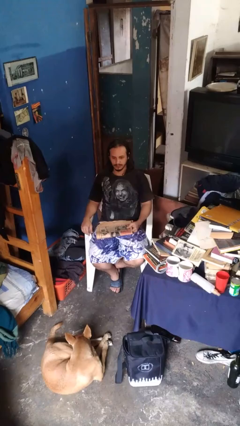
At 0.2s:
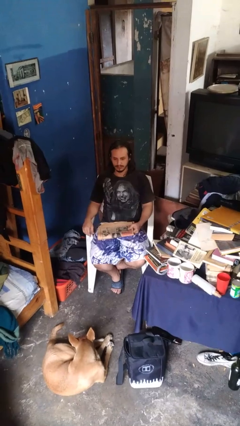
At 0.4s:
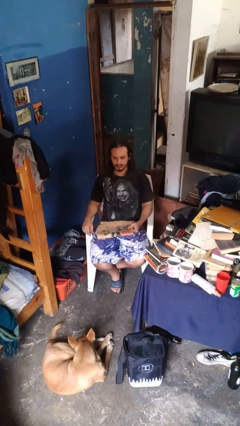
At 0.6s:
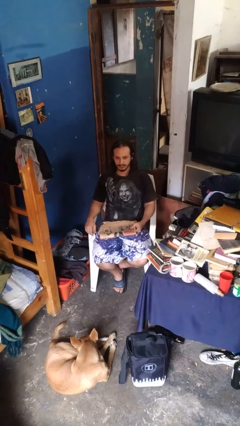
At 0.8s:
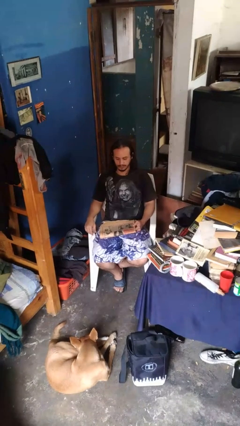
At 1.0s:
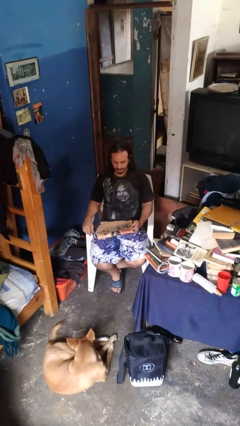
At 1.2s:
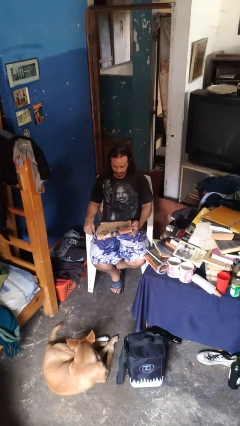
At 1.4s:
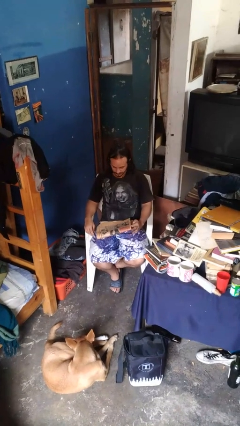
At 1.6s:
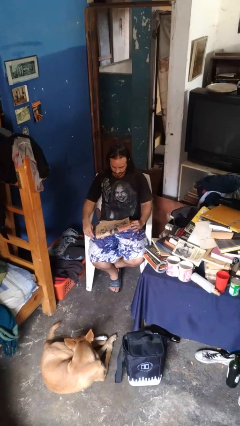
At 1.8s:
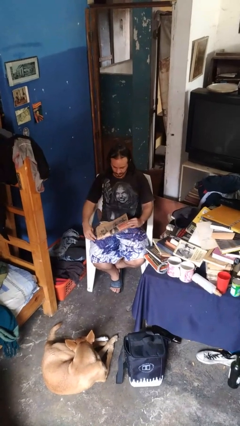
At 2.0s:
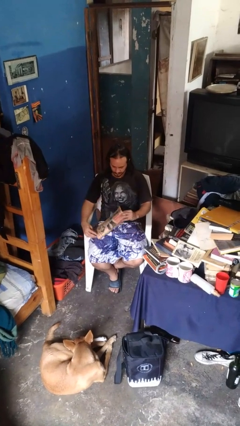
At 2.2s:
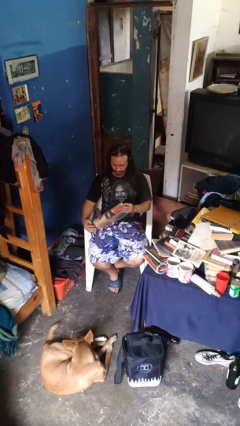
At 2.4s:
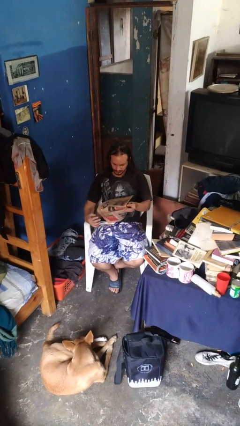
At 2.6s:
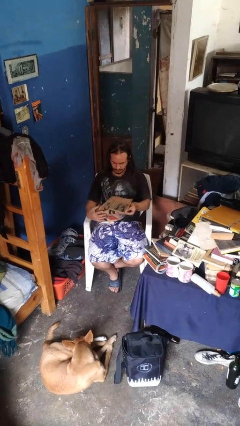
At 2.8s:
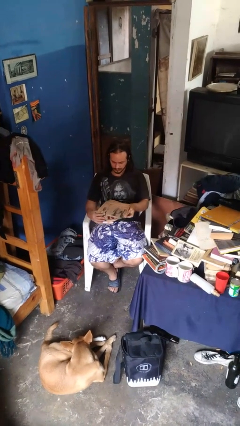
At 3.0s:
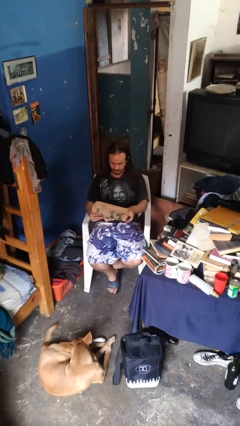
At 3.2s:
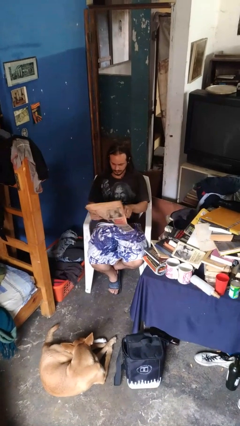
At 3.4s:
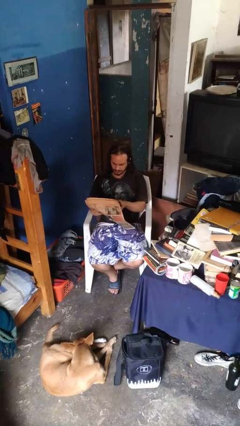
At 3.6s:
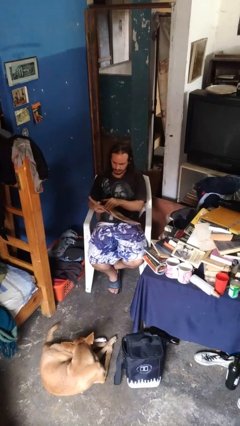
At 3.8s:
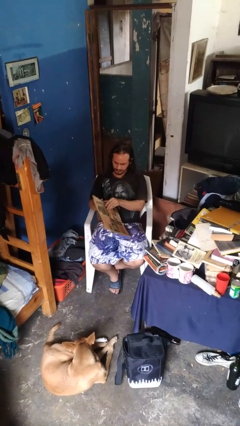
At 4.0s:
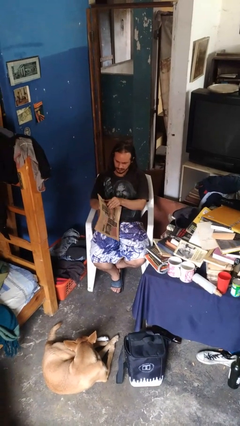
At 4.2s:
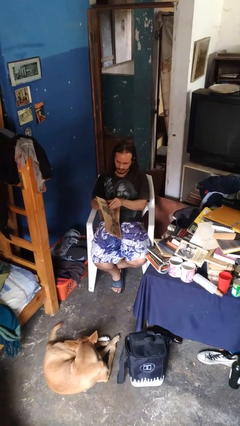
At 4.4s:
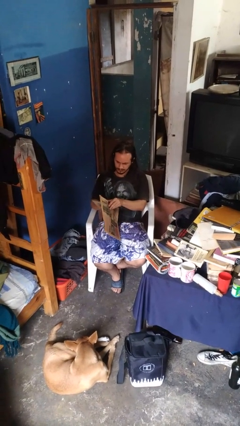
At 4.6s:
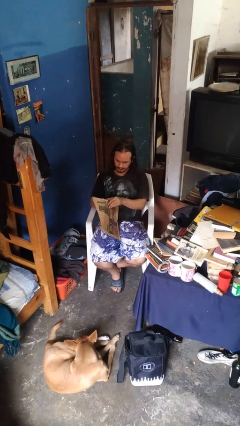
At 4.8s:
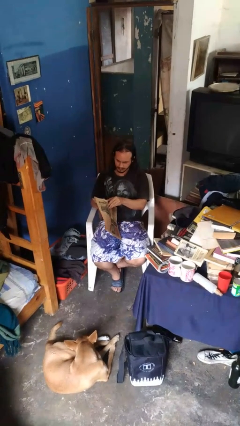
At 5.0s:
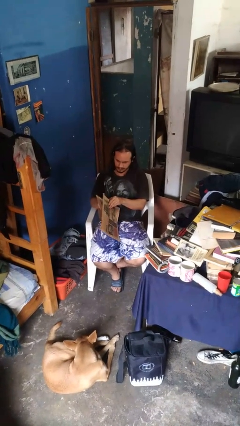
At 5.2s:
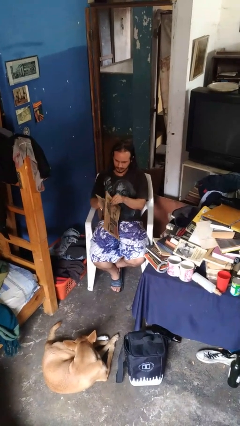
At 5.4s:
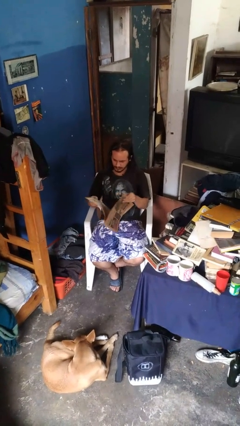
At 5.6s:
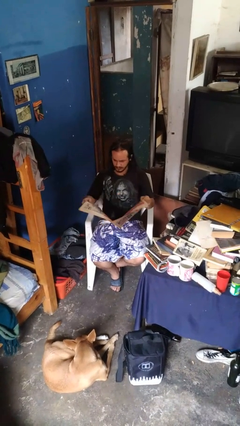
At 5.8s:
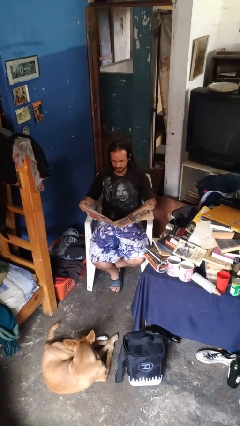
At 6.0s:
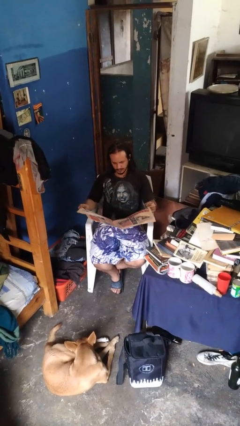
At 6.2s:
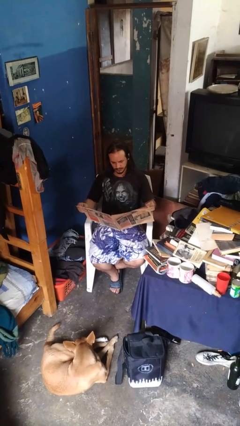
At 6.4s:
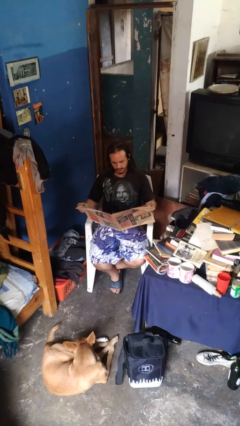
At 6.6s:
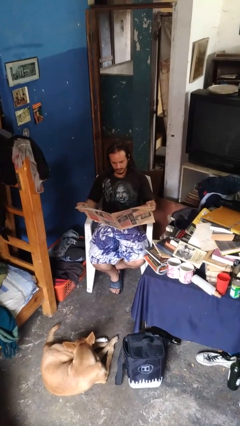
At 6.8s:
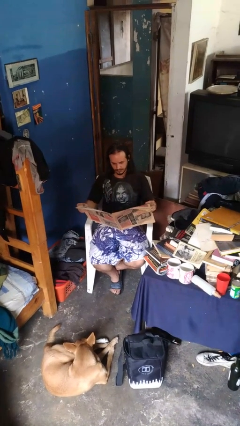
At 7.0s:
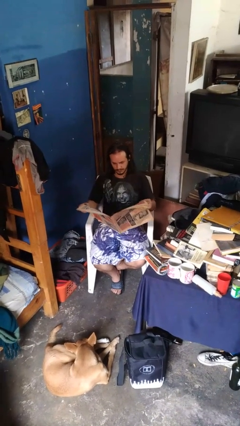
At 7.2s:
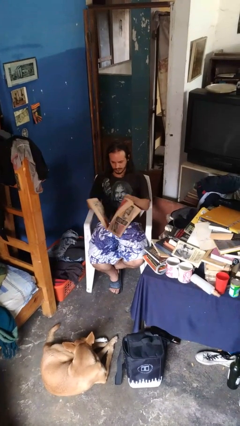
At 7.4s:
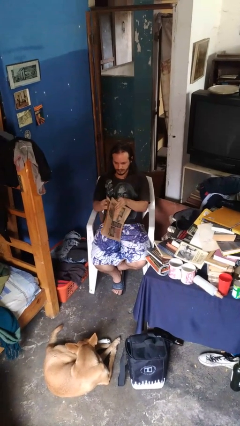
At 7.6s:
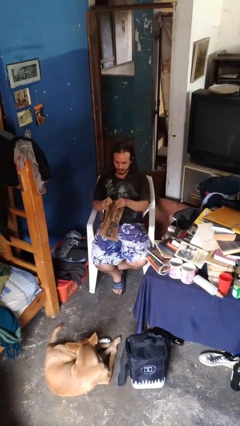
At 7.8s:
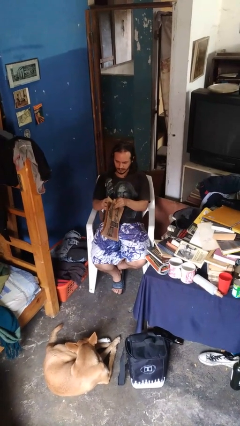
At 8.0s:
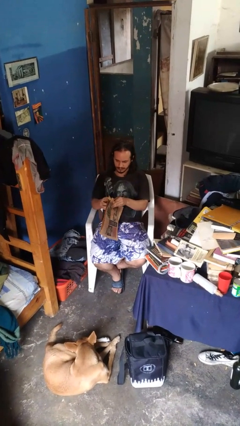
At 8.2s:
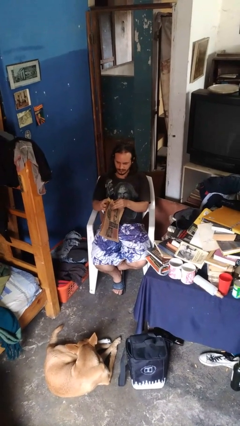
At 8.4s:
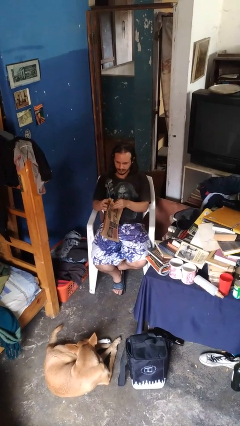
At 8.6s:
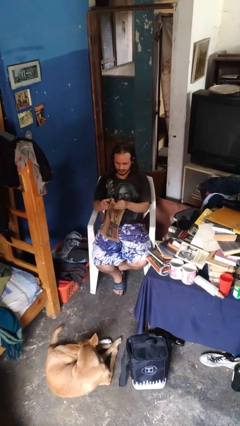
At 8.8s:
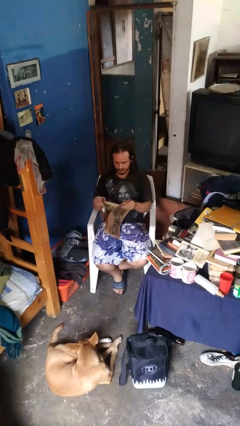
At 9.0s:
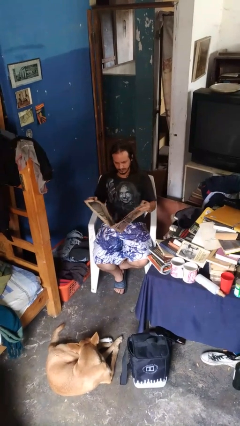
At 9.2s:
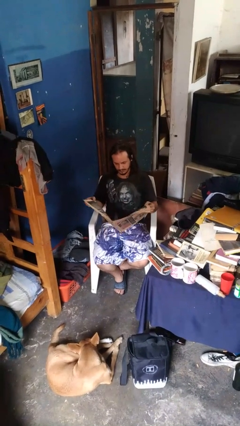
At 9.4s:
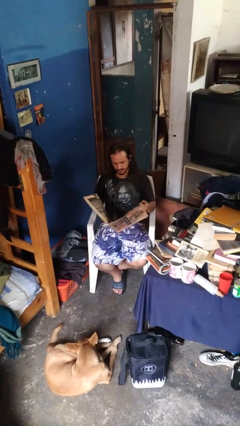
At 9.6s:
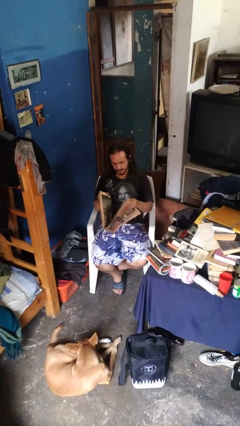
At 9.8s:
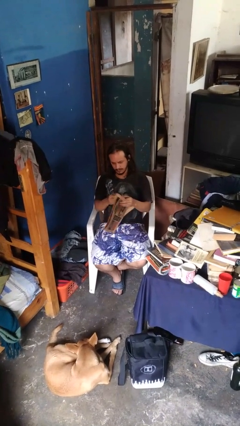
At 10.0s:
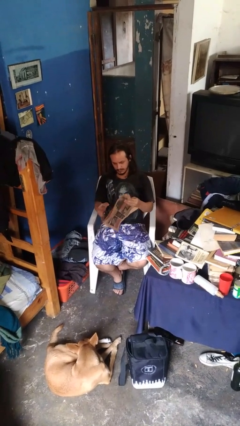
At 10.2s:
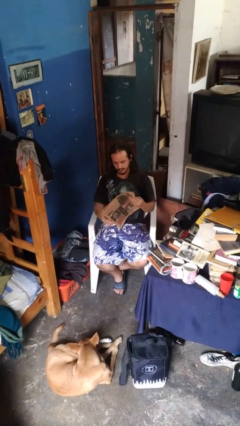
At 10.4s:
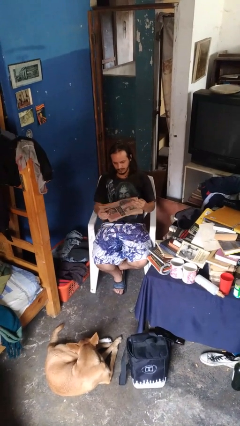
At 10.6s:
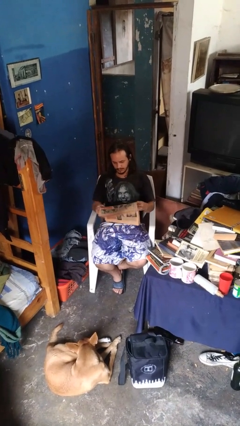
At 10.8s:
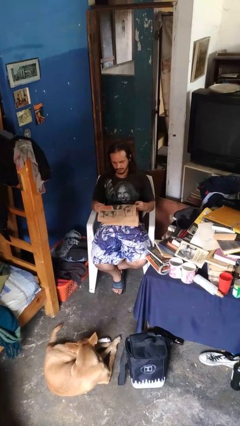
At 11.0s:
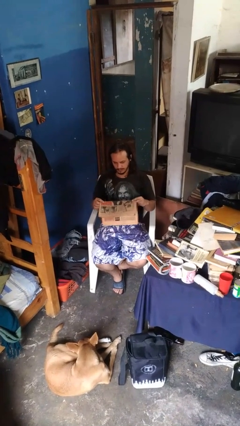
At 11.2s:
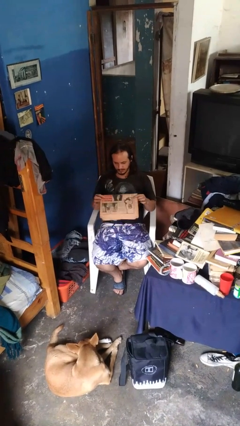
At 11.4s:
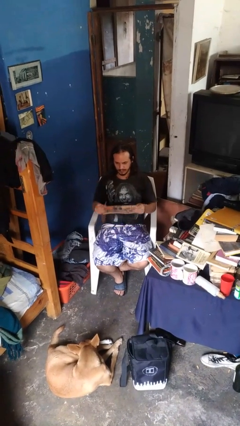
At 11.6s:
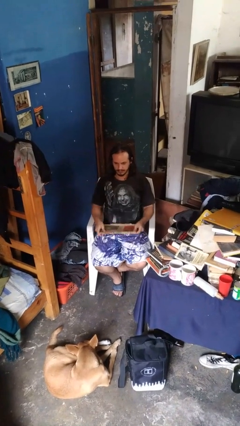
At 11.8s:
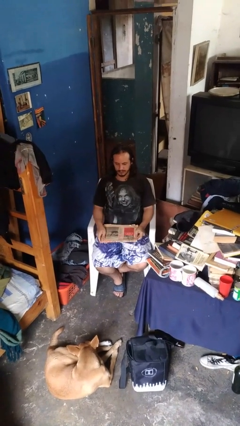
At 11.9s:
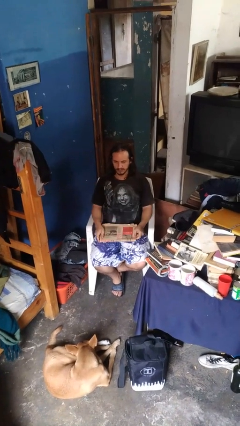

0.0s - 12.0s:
person reads newspaper

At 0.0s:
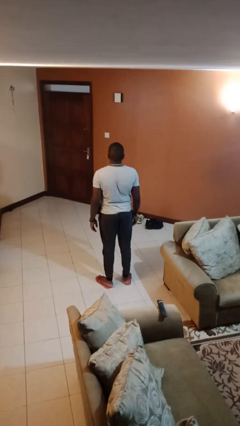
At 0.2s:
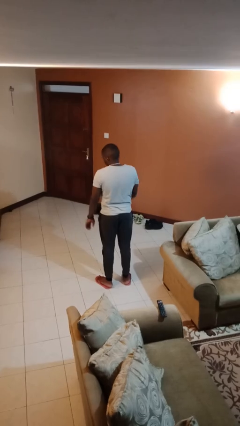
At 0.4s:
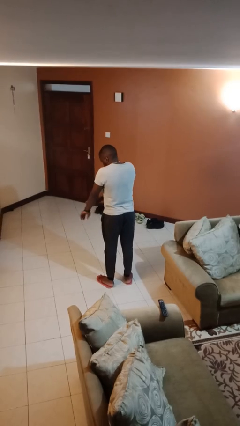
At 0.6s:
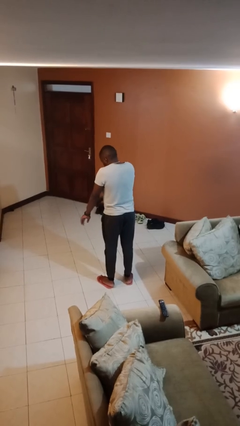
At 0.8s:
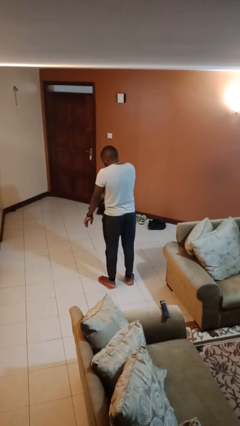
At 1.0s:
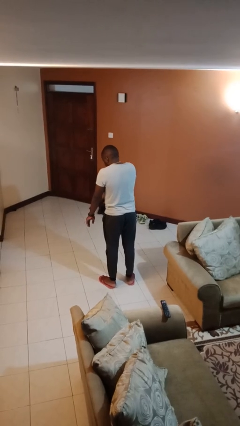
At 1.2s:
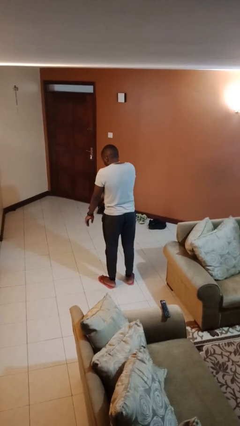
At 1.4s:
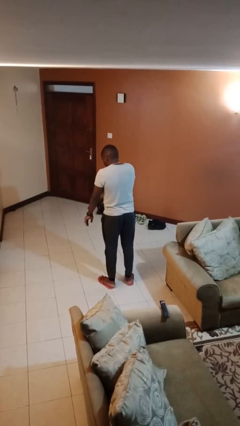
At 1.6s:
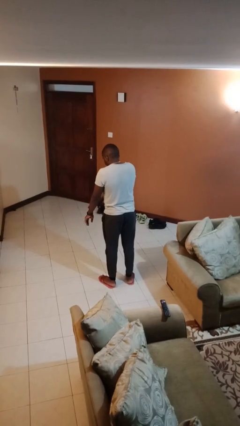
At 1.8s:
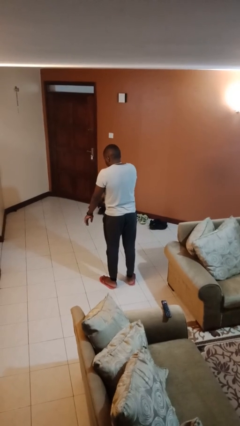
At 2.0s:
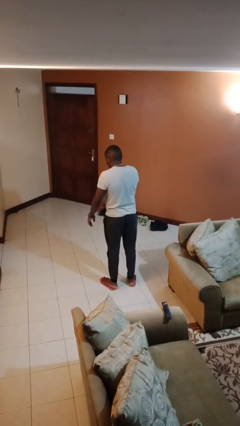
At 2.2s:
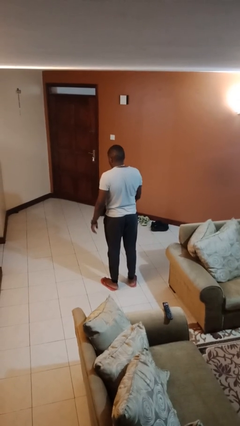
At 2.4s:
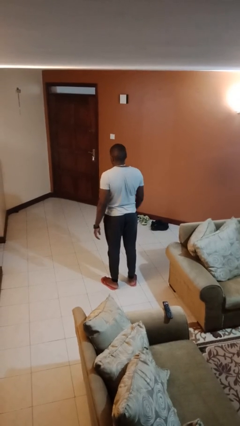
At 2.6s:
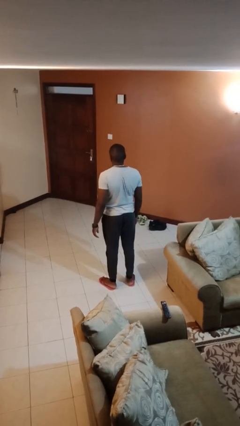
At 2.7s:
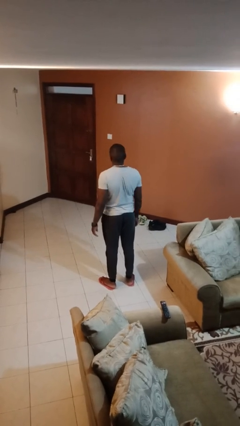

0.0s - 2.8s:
person swats bug

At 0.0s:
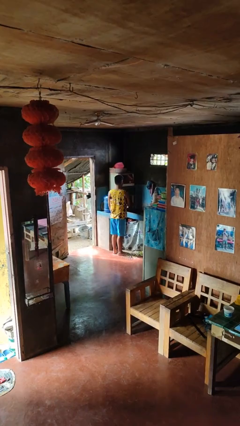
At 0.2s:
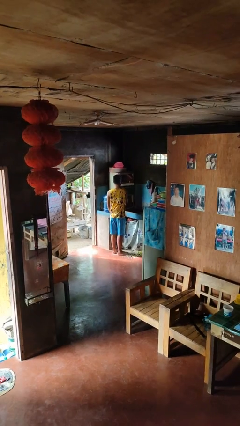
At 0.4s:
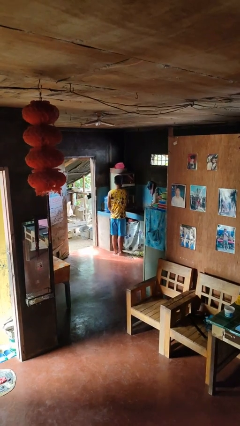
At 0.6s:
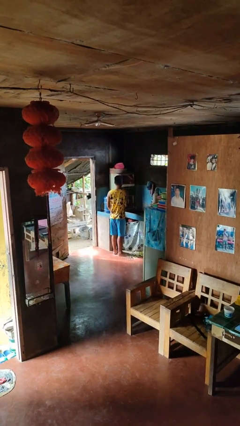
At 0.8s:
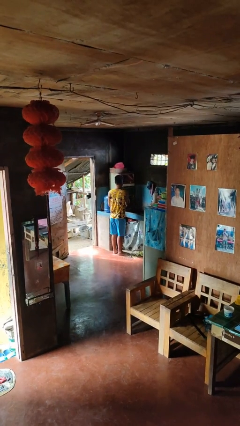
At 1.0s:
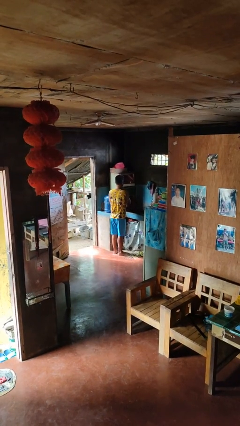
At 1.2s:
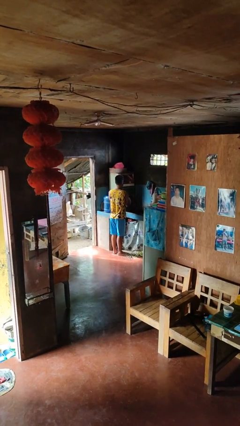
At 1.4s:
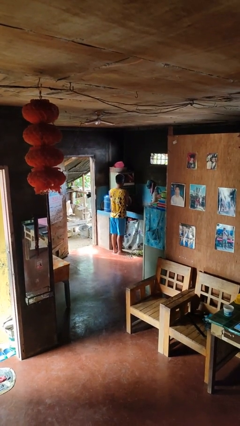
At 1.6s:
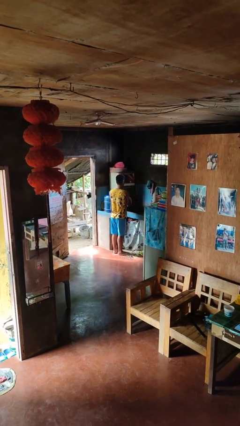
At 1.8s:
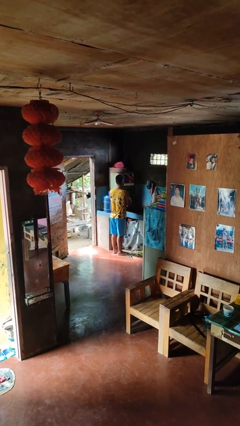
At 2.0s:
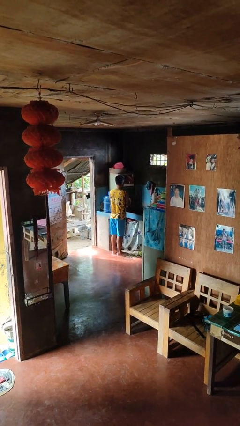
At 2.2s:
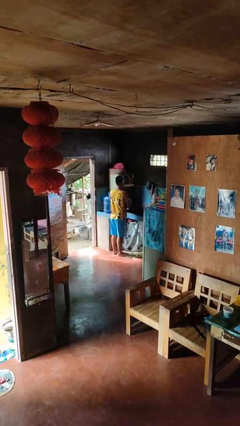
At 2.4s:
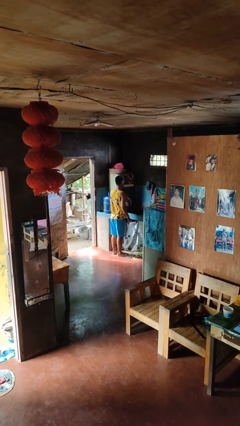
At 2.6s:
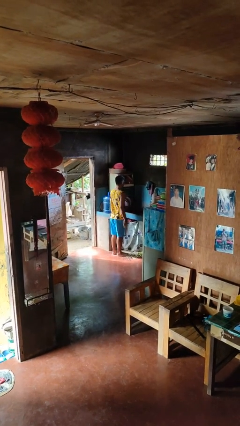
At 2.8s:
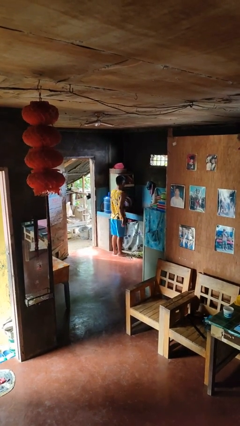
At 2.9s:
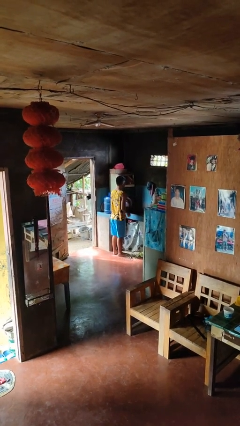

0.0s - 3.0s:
person opens dishwasher

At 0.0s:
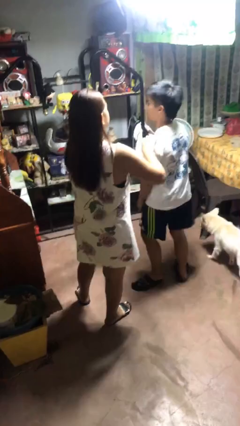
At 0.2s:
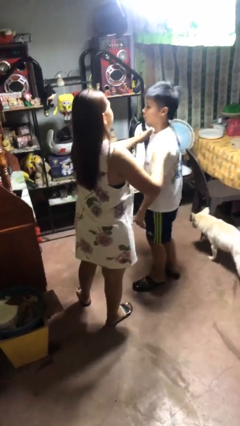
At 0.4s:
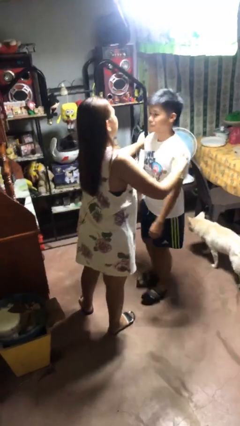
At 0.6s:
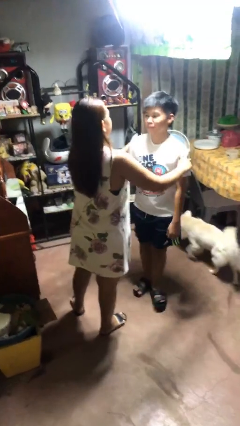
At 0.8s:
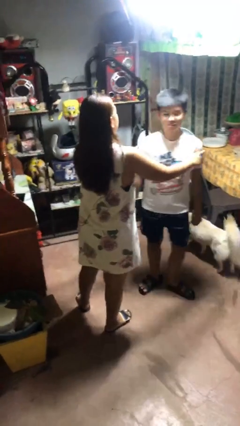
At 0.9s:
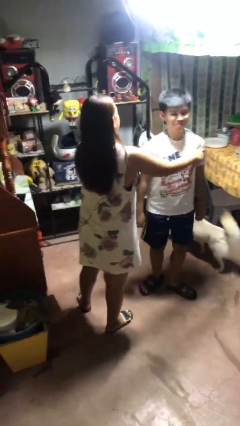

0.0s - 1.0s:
person spins person around
